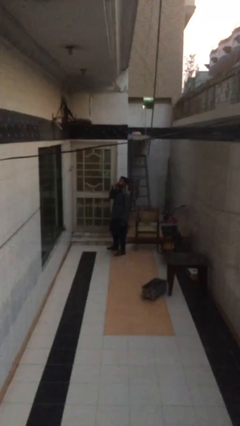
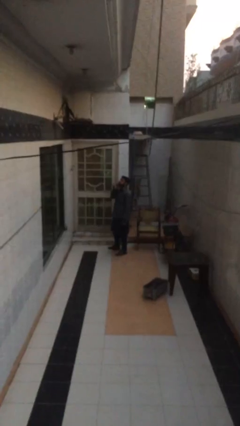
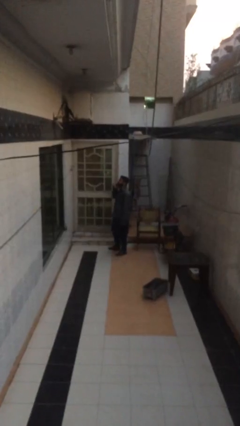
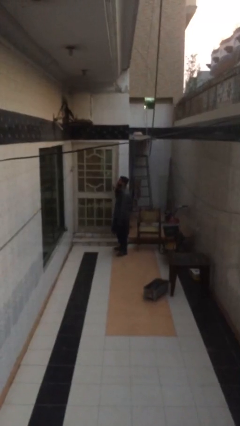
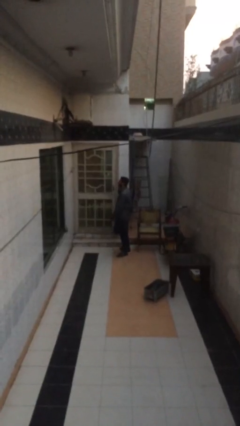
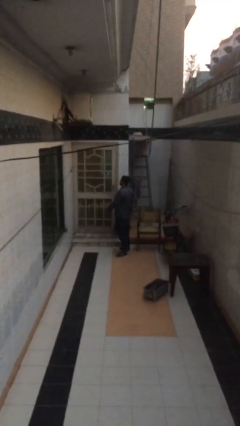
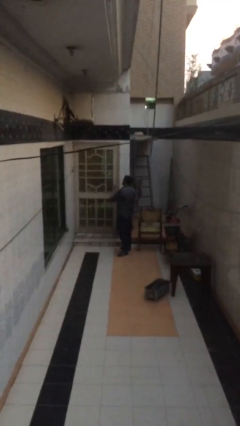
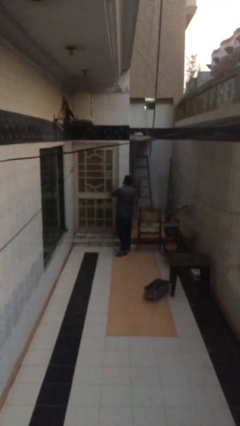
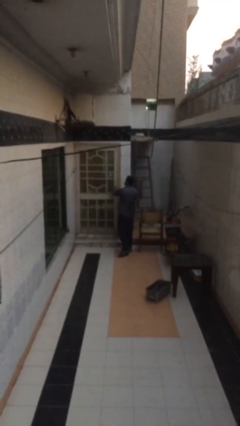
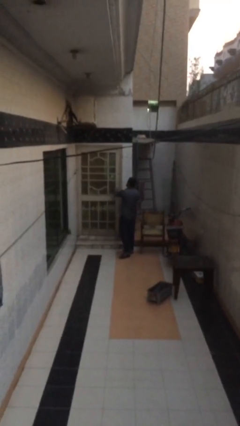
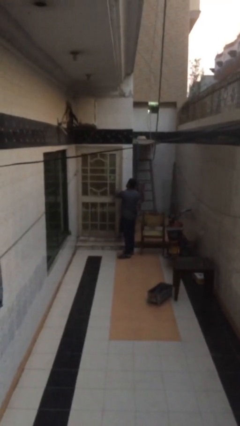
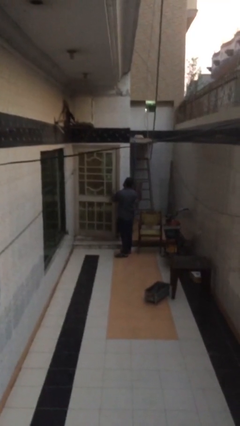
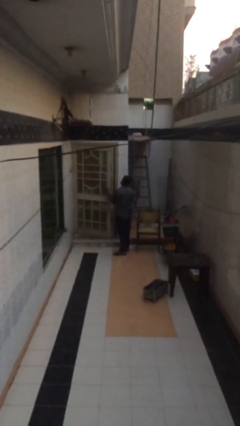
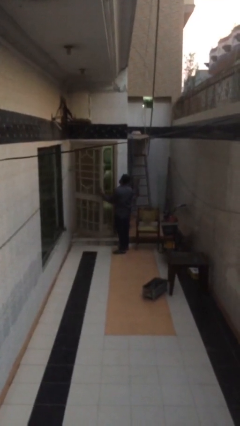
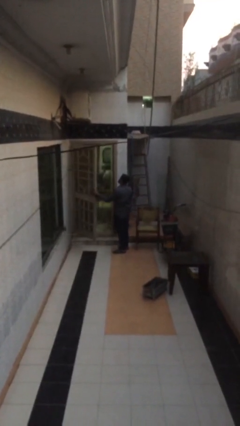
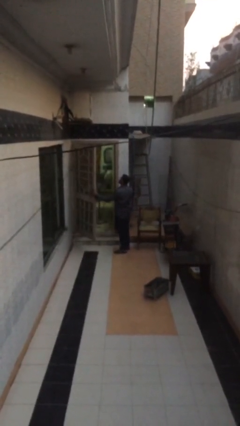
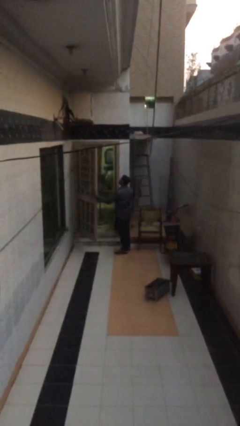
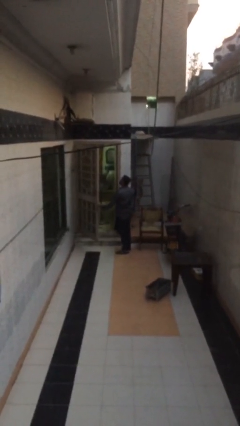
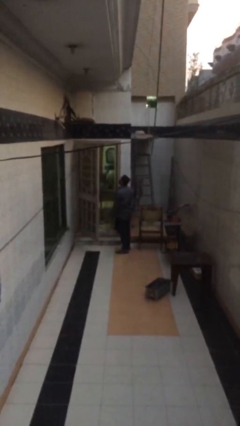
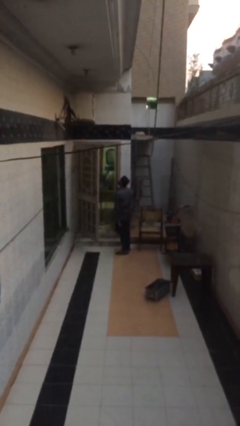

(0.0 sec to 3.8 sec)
person opens facility door

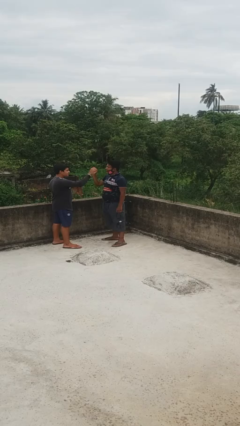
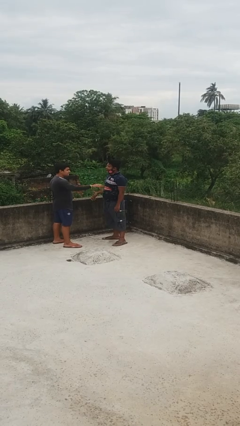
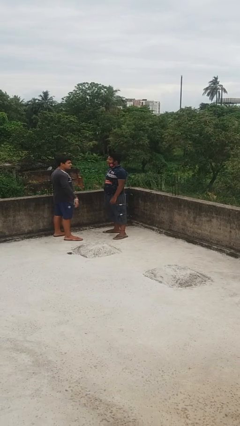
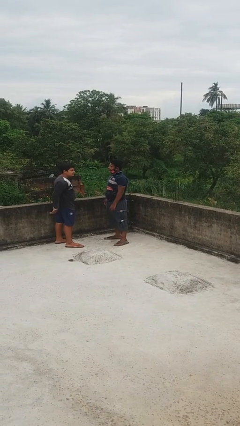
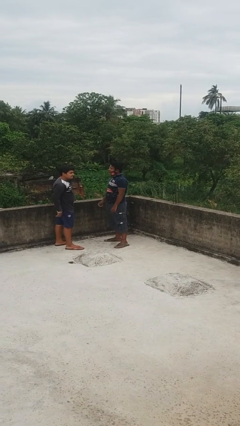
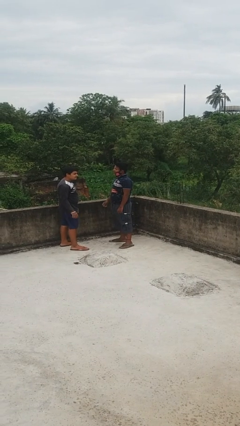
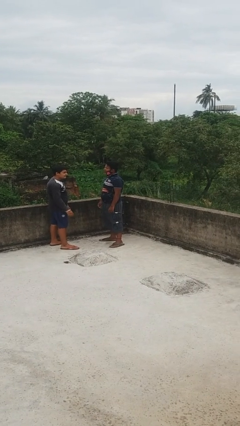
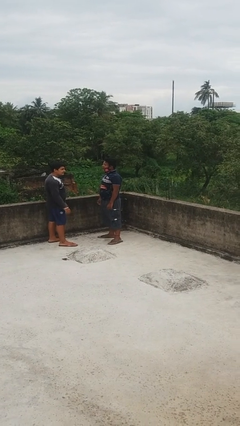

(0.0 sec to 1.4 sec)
person highfives hand

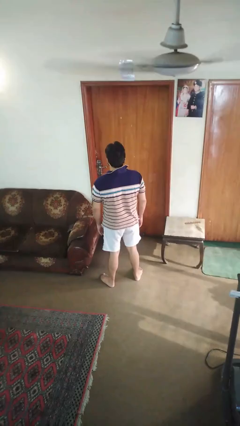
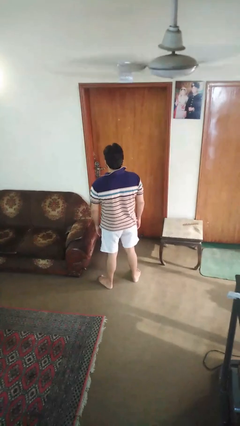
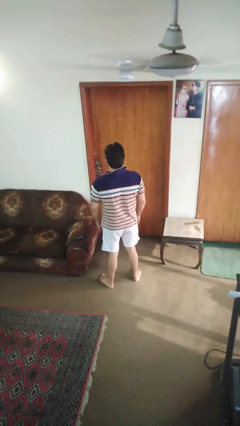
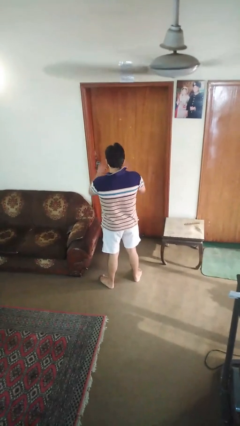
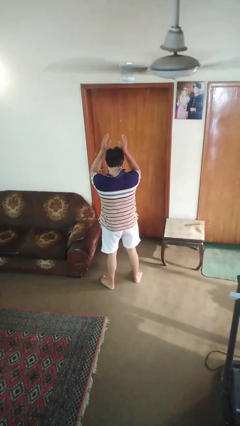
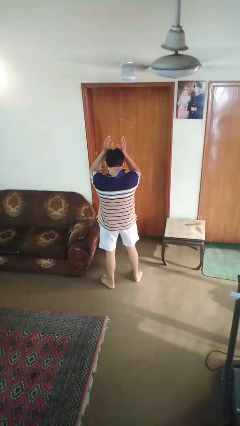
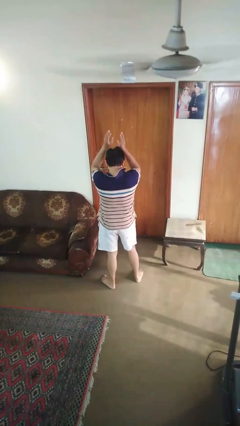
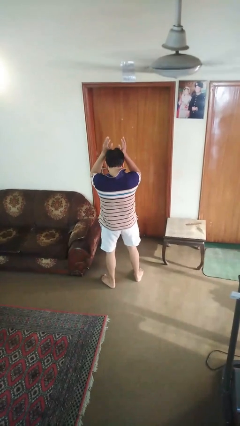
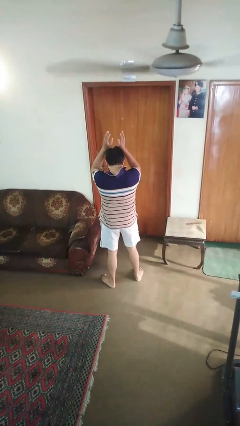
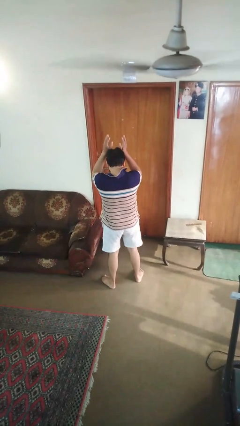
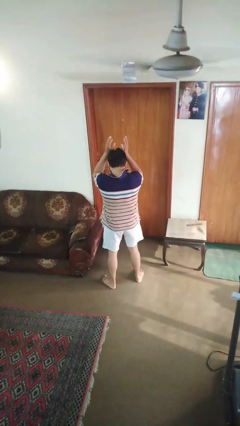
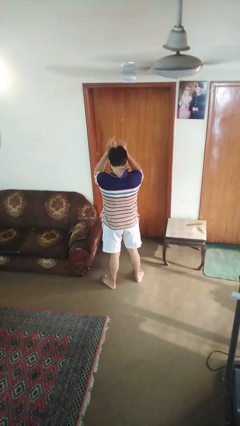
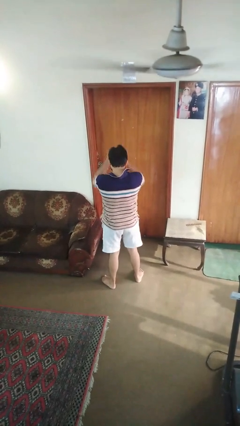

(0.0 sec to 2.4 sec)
person dances in place

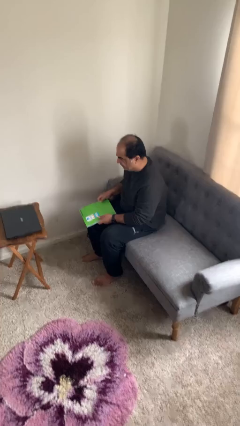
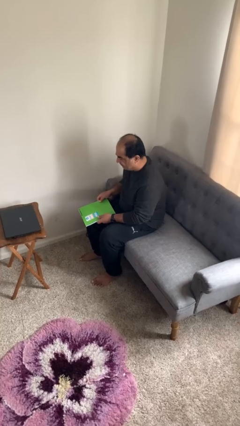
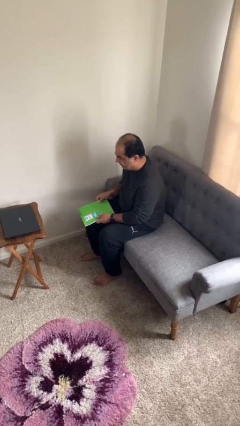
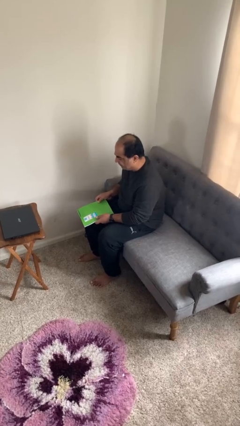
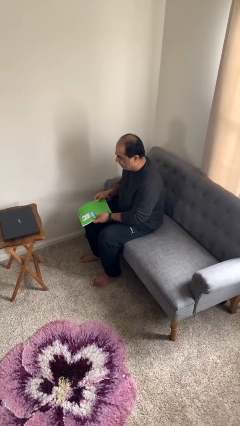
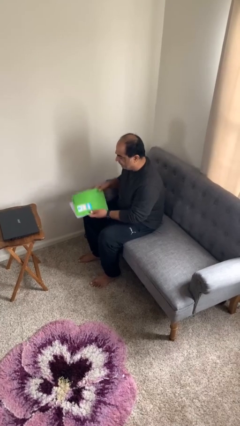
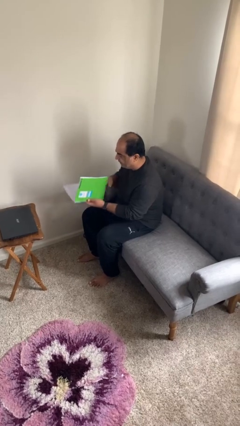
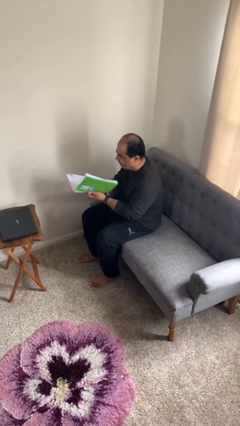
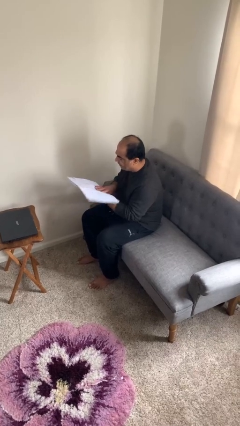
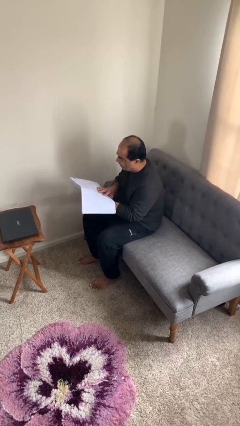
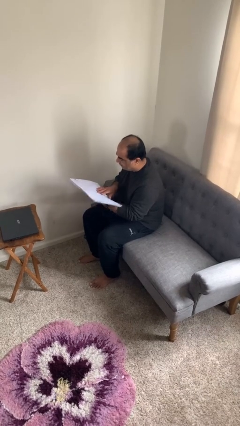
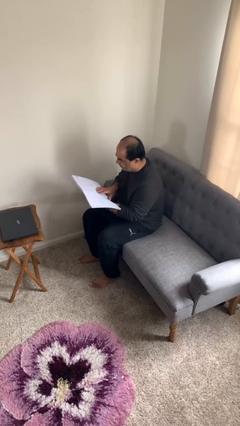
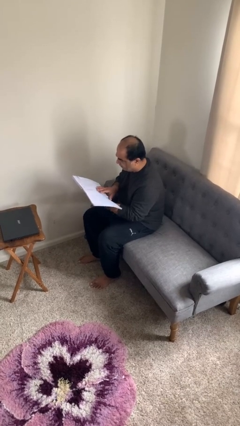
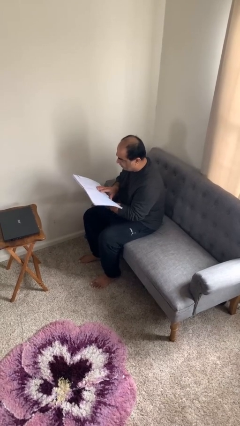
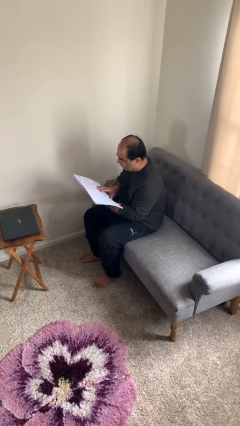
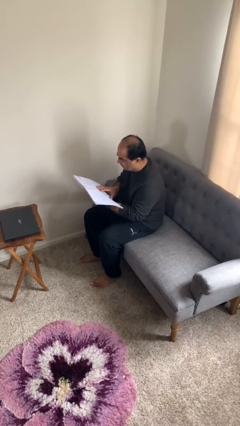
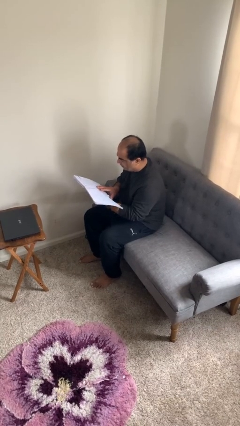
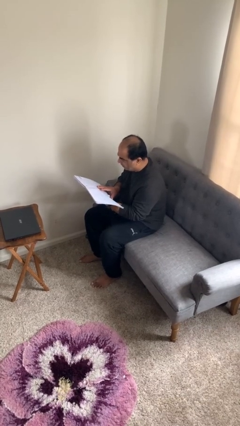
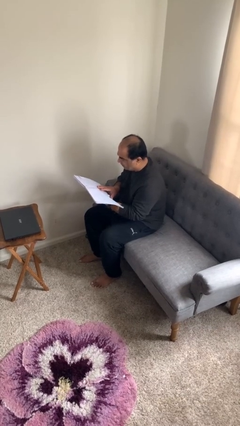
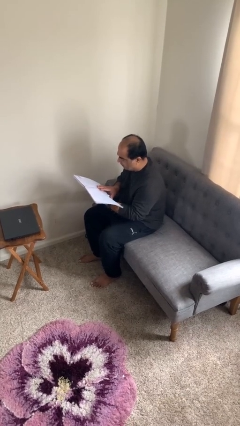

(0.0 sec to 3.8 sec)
person reads document

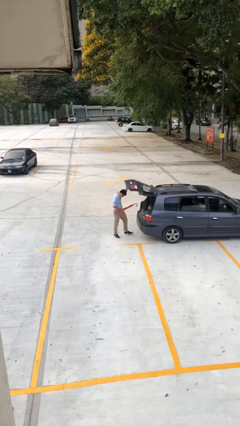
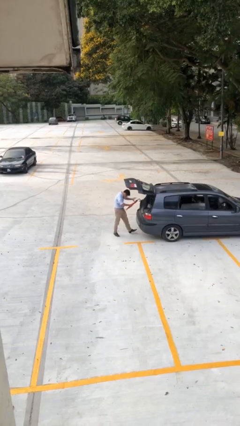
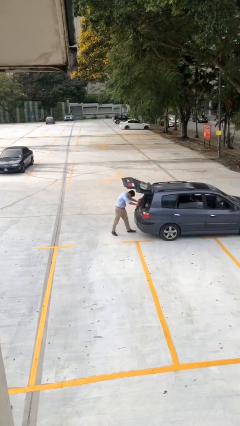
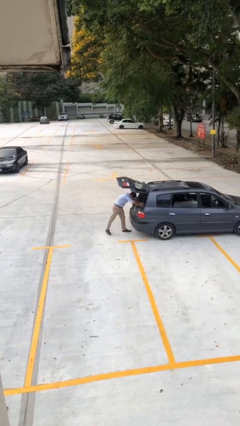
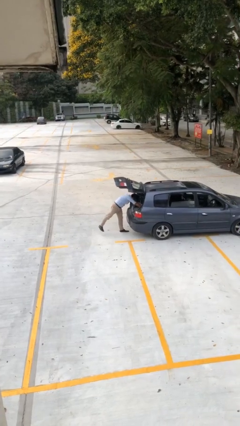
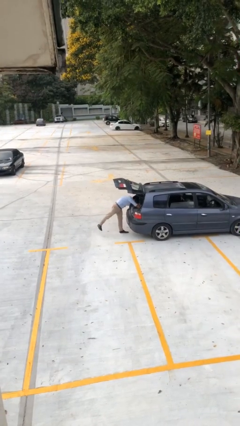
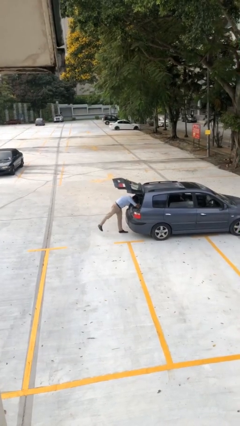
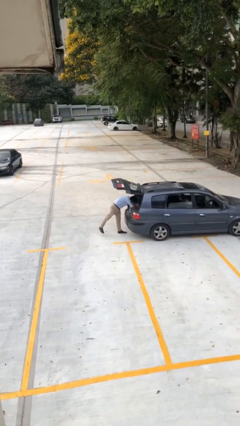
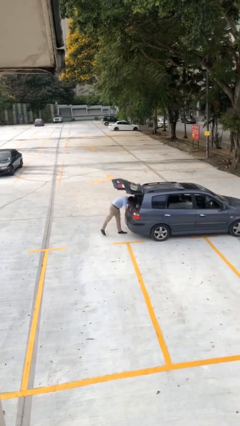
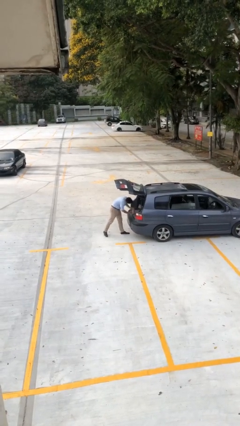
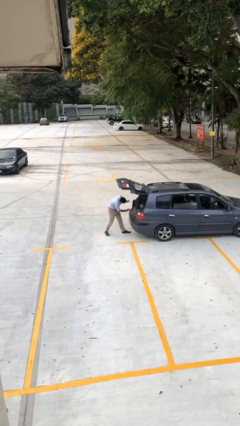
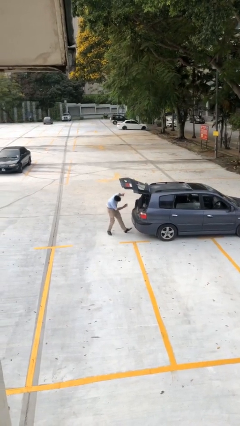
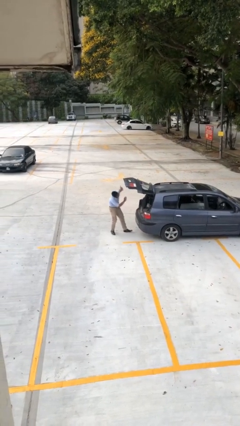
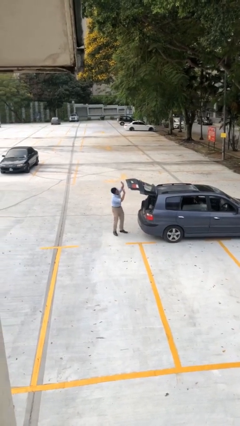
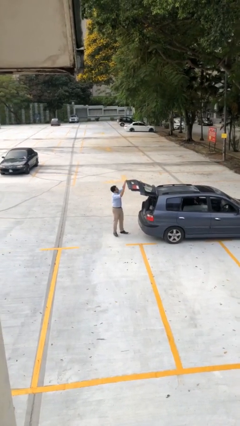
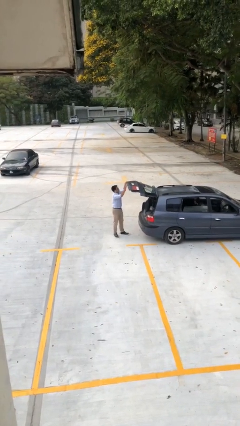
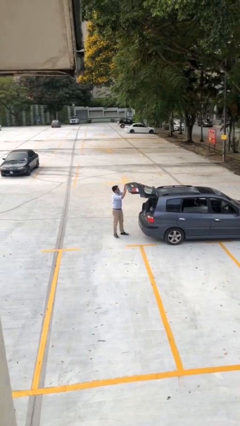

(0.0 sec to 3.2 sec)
person loads car

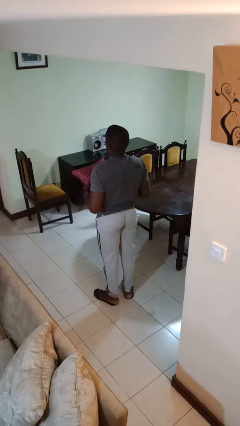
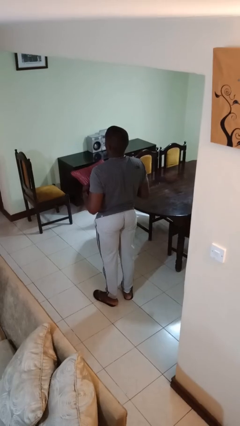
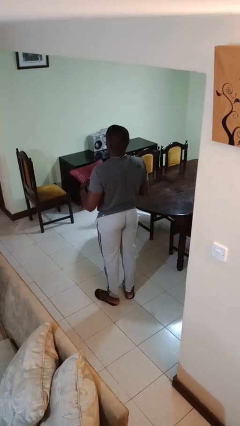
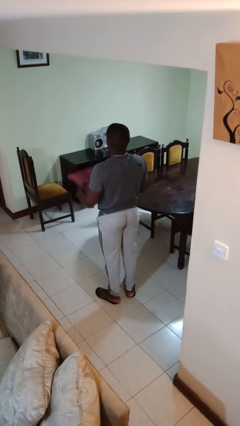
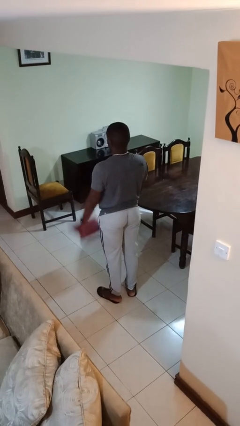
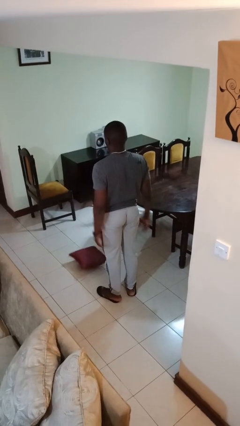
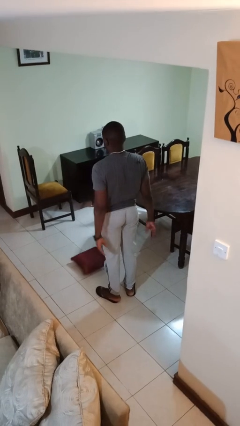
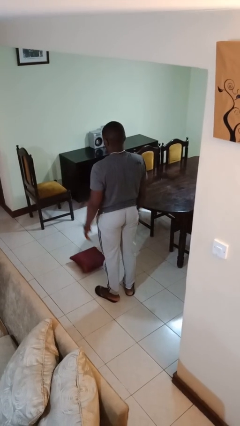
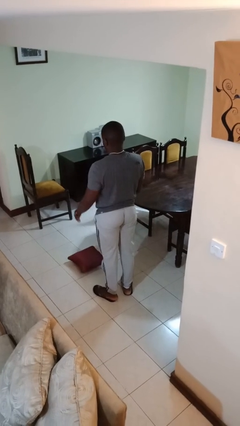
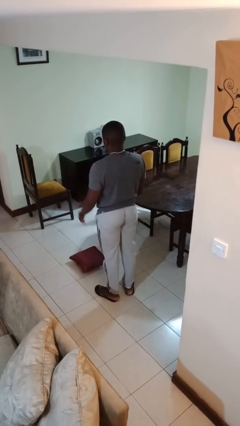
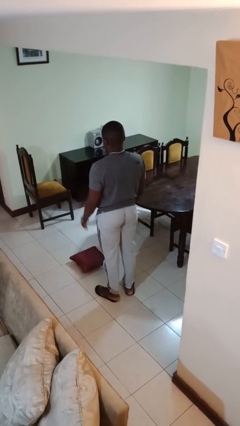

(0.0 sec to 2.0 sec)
person throws object to ground

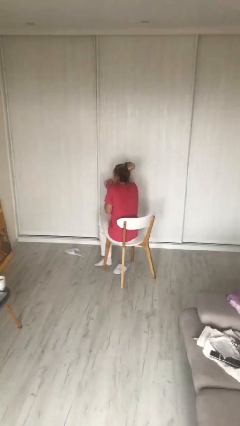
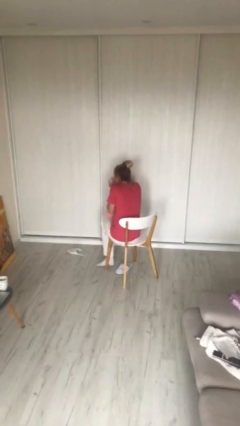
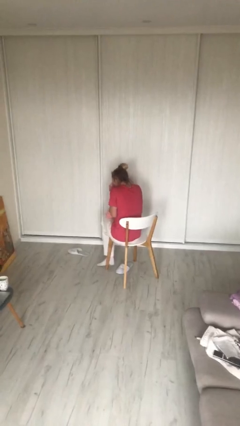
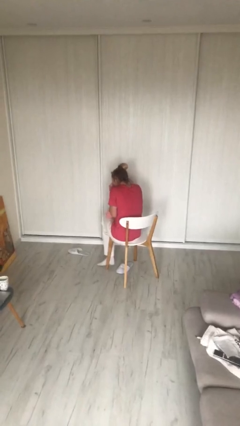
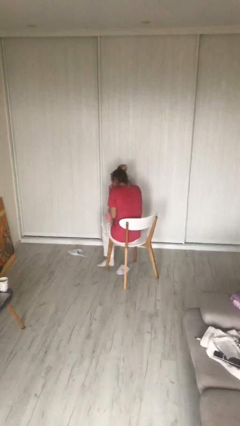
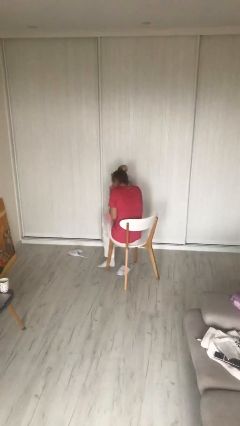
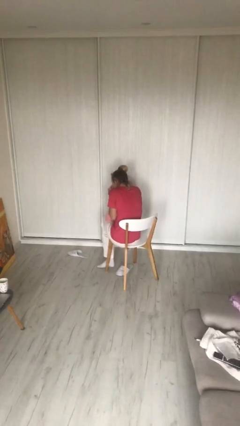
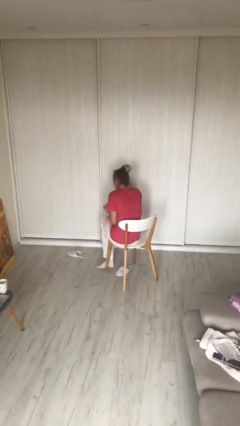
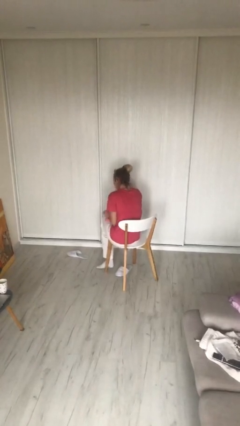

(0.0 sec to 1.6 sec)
person blows nose
